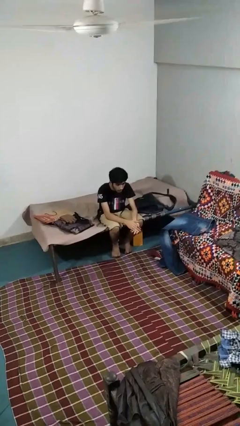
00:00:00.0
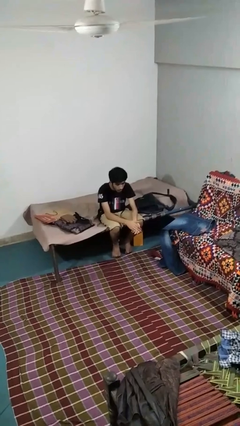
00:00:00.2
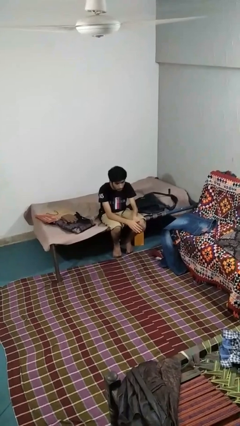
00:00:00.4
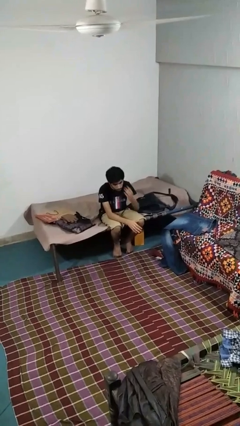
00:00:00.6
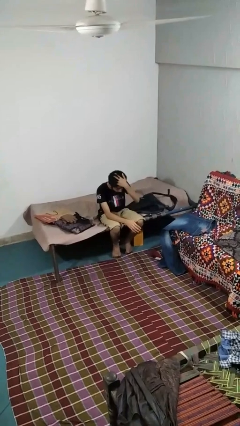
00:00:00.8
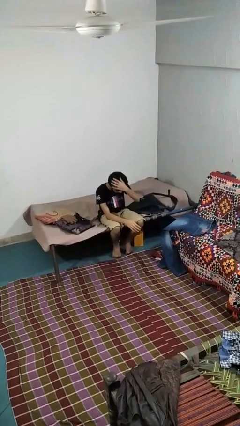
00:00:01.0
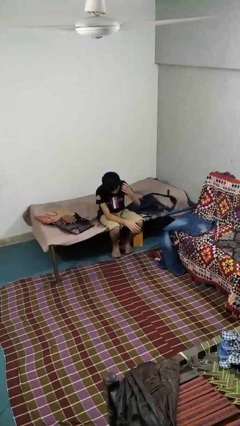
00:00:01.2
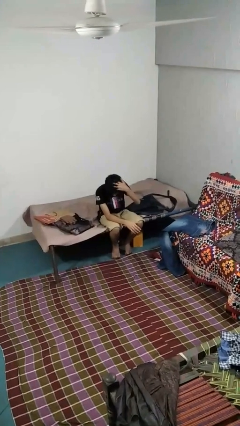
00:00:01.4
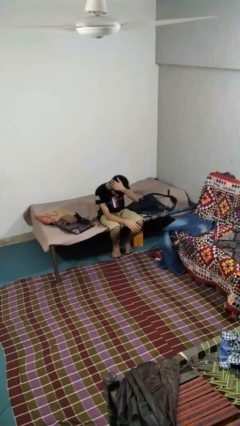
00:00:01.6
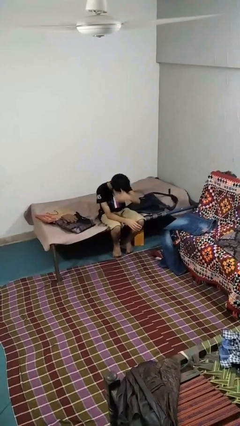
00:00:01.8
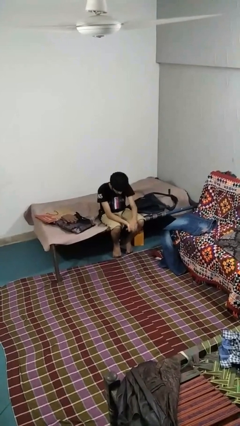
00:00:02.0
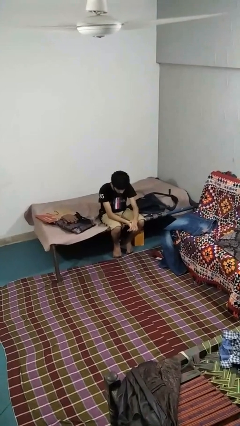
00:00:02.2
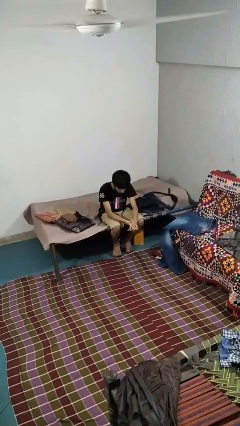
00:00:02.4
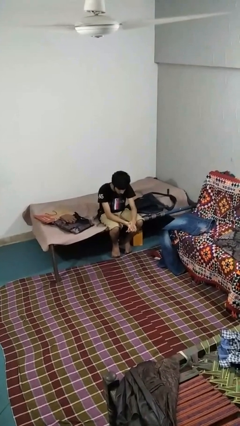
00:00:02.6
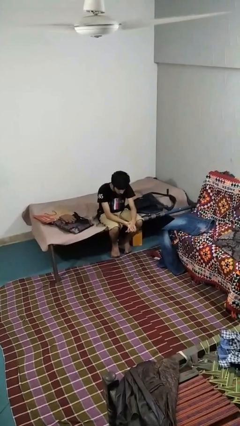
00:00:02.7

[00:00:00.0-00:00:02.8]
person strokes hair

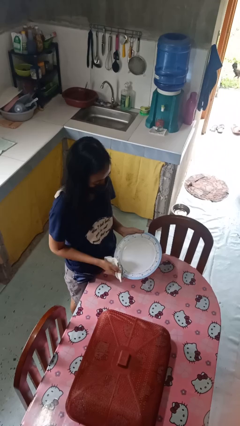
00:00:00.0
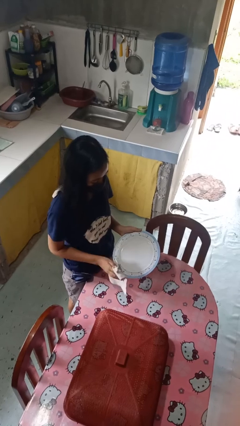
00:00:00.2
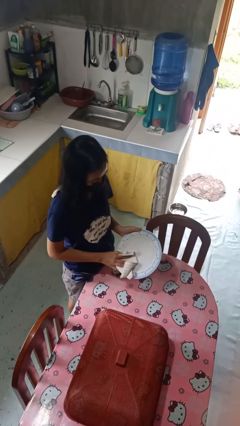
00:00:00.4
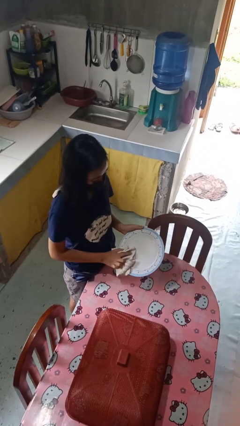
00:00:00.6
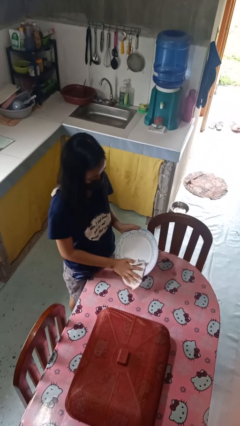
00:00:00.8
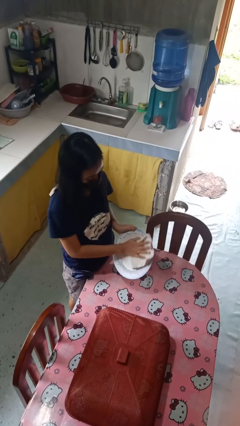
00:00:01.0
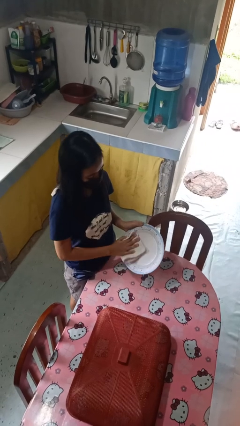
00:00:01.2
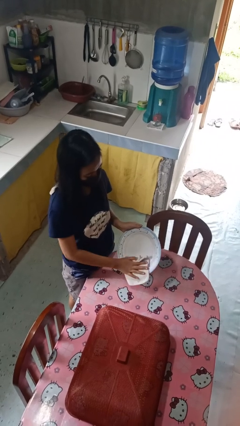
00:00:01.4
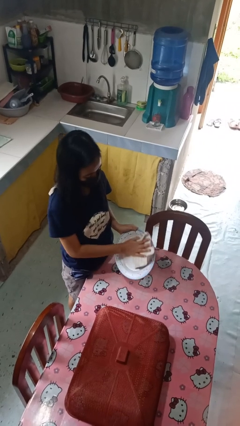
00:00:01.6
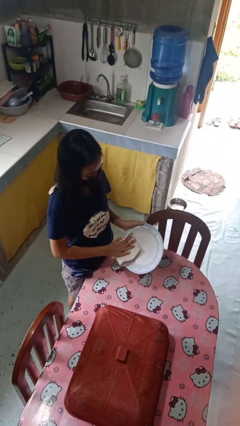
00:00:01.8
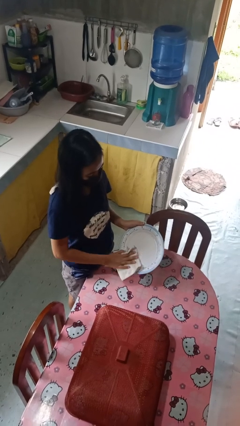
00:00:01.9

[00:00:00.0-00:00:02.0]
person dries dish

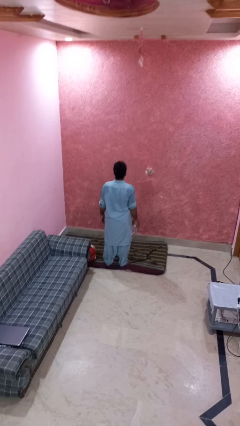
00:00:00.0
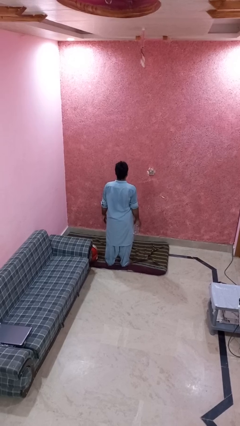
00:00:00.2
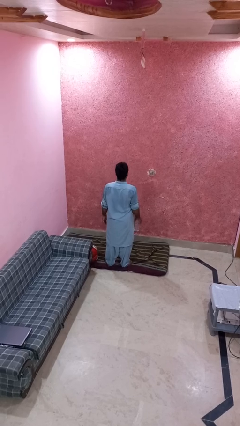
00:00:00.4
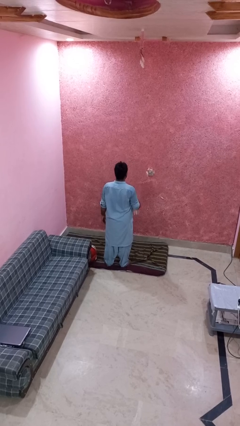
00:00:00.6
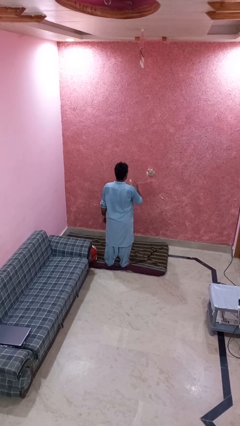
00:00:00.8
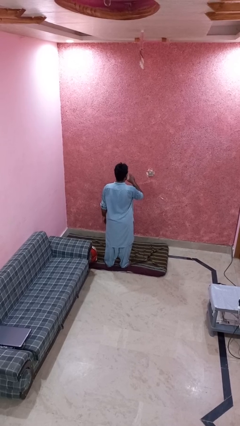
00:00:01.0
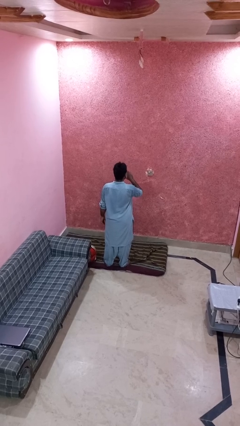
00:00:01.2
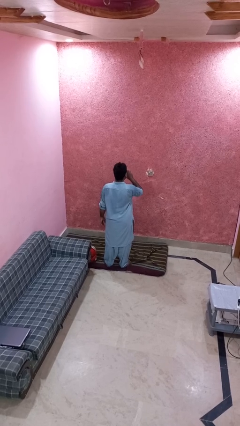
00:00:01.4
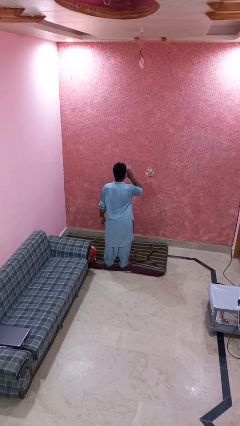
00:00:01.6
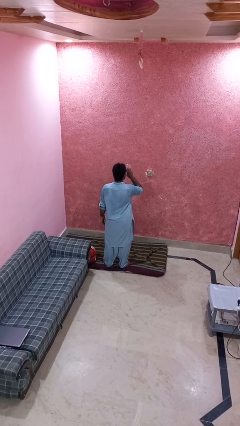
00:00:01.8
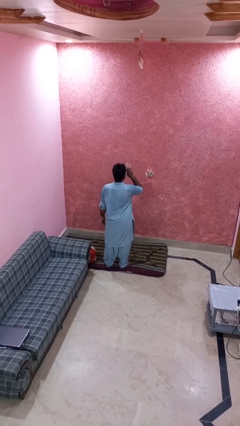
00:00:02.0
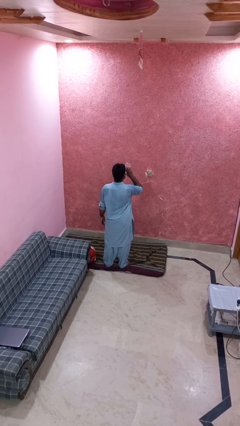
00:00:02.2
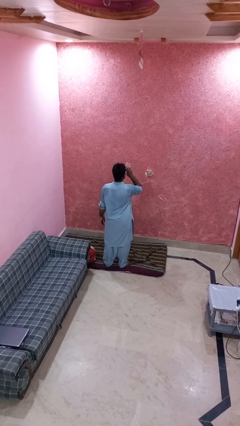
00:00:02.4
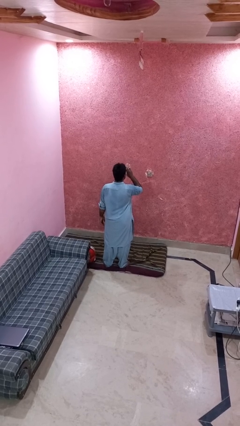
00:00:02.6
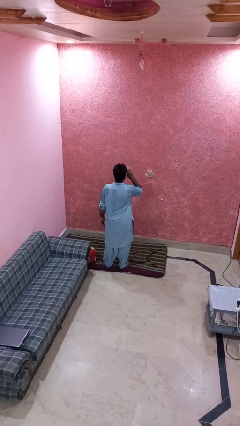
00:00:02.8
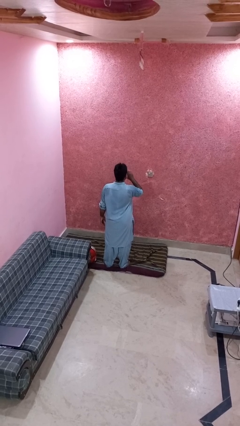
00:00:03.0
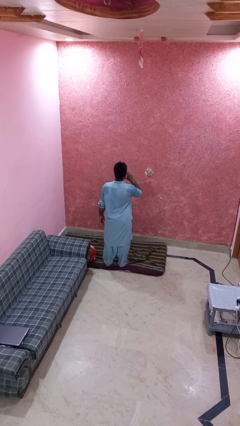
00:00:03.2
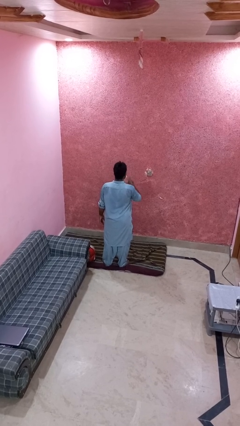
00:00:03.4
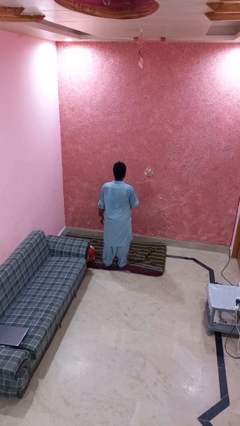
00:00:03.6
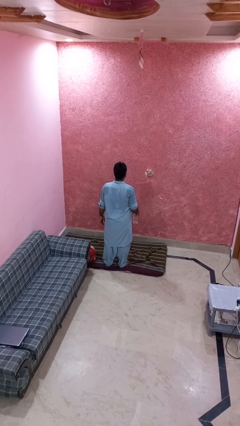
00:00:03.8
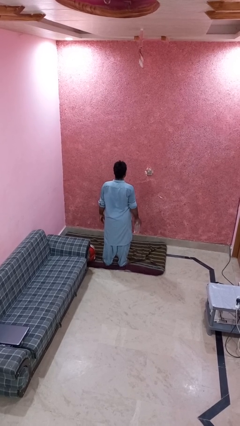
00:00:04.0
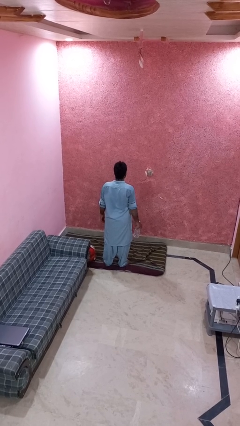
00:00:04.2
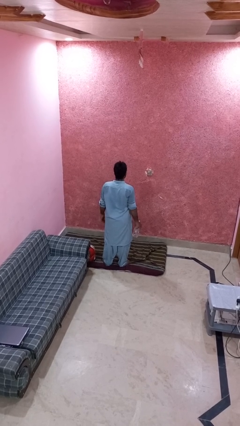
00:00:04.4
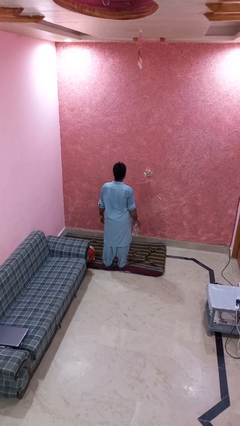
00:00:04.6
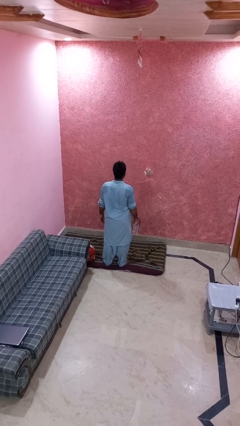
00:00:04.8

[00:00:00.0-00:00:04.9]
person drinks from bottle

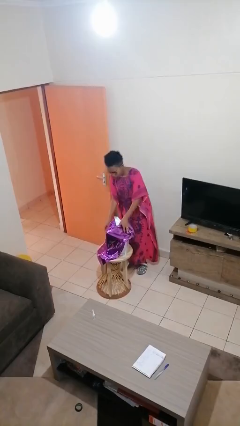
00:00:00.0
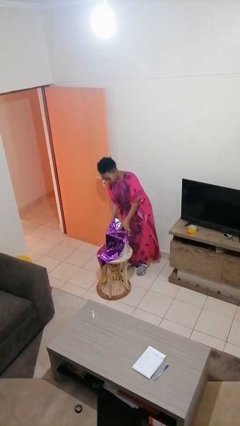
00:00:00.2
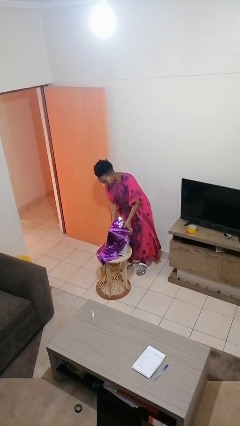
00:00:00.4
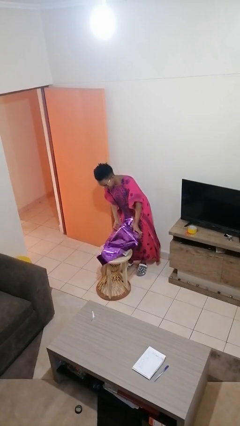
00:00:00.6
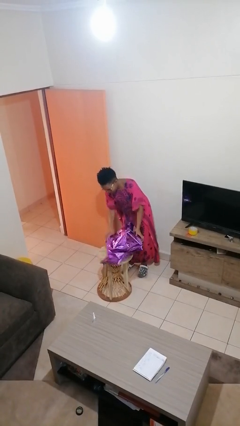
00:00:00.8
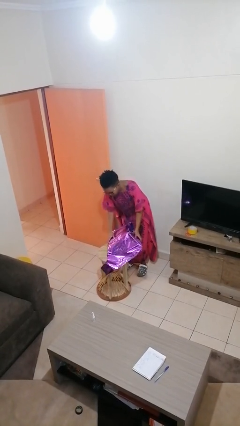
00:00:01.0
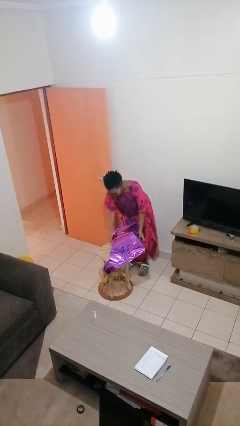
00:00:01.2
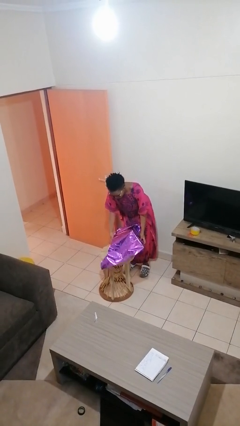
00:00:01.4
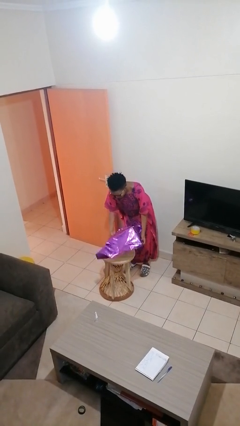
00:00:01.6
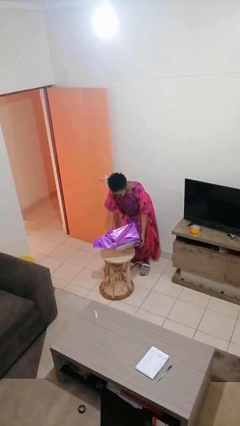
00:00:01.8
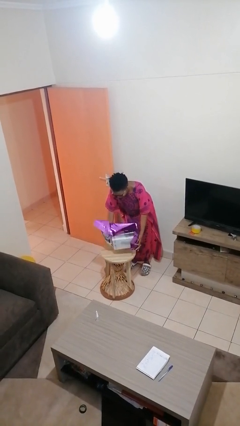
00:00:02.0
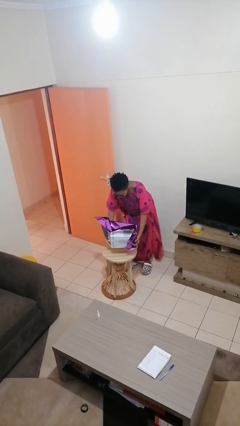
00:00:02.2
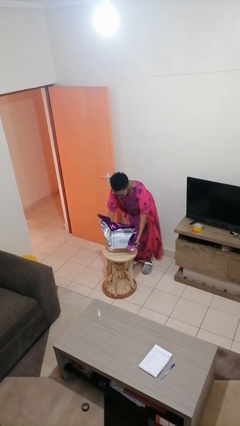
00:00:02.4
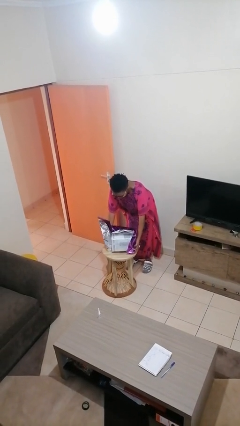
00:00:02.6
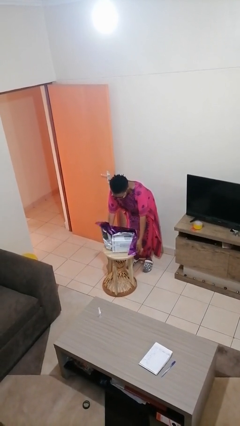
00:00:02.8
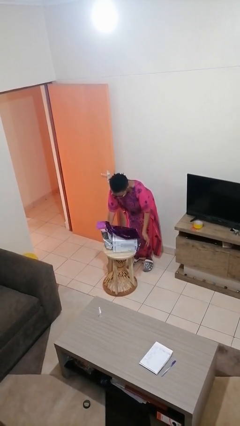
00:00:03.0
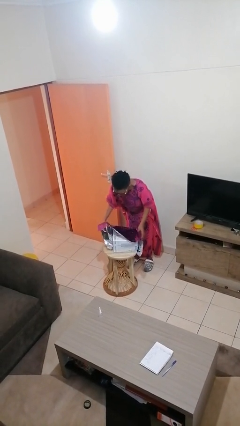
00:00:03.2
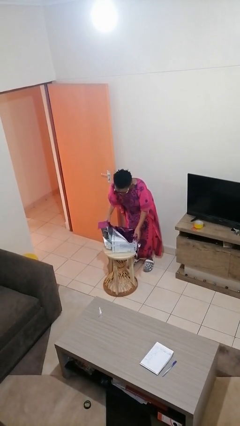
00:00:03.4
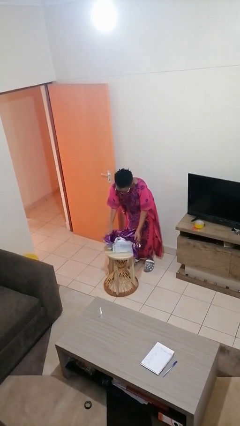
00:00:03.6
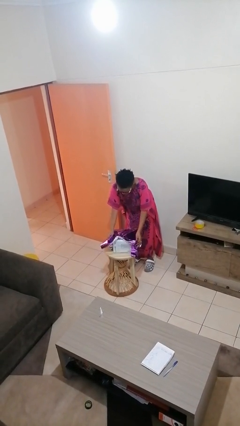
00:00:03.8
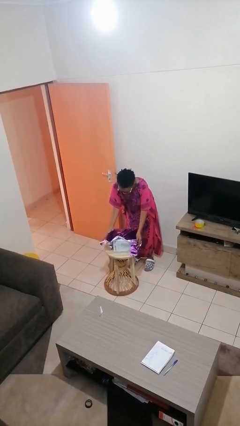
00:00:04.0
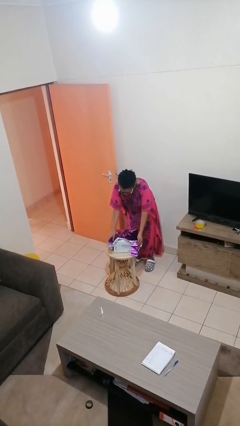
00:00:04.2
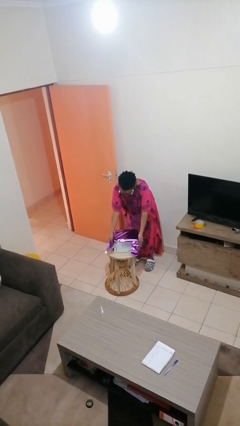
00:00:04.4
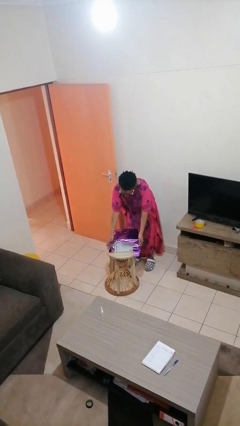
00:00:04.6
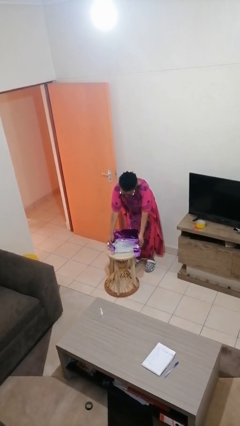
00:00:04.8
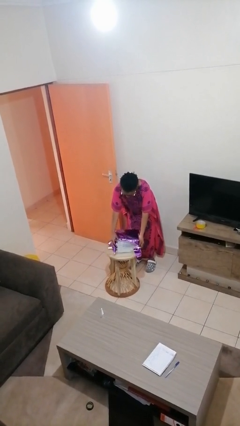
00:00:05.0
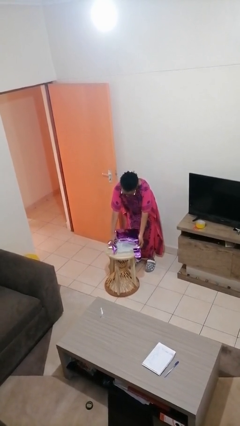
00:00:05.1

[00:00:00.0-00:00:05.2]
person wraps box

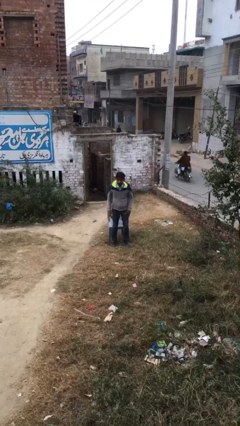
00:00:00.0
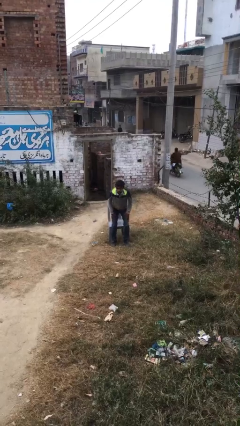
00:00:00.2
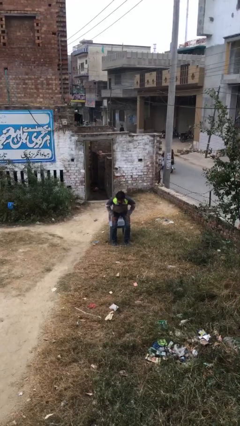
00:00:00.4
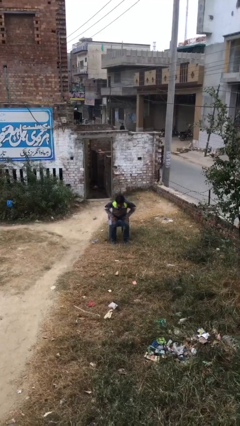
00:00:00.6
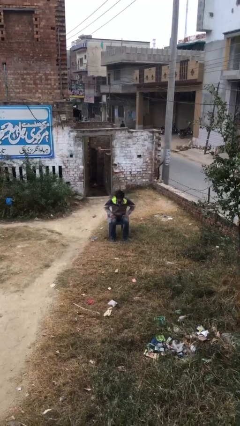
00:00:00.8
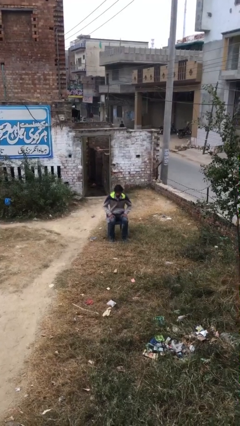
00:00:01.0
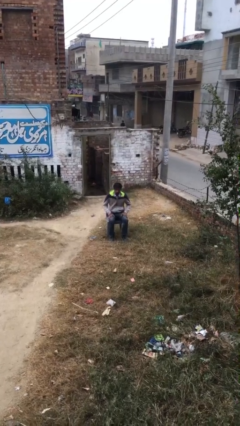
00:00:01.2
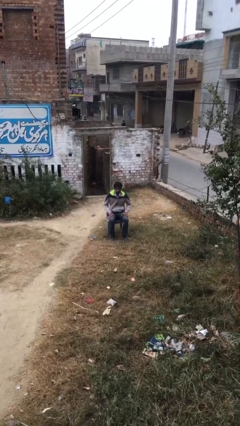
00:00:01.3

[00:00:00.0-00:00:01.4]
person sits down

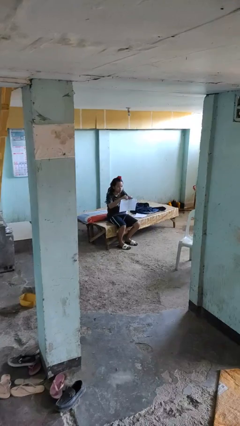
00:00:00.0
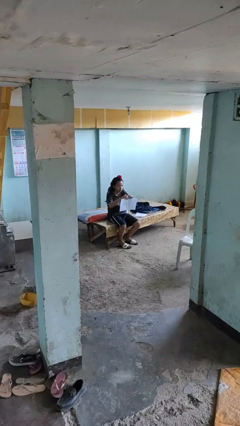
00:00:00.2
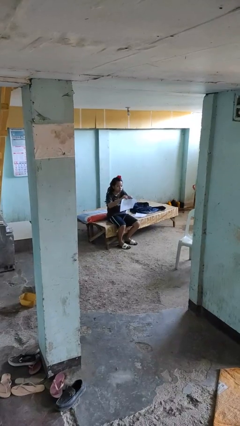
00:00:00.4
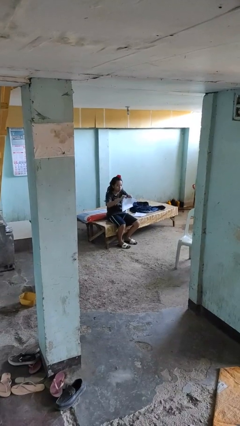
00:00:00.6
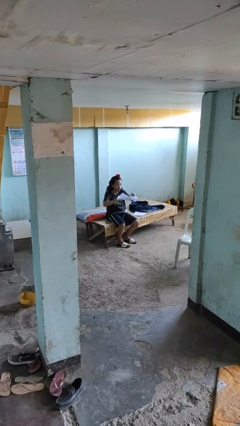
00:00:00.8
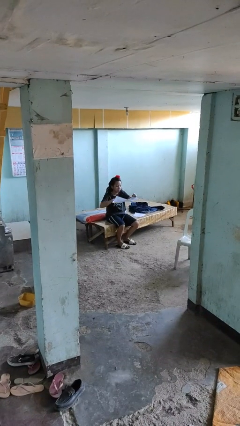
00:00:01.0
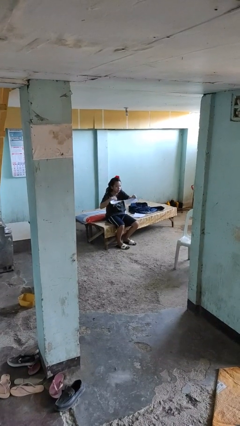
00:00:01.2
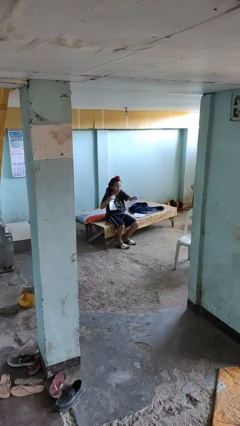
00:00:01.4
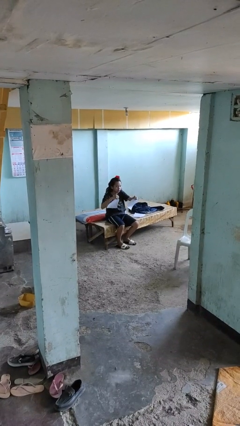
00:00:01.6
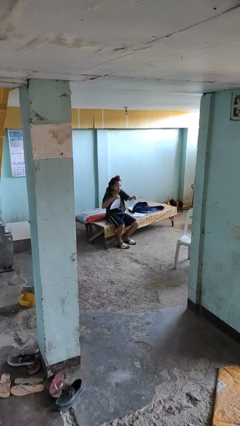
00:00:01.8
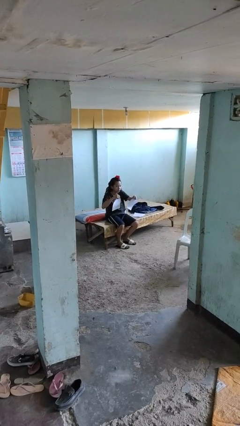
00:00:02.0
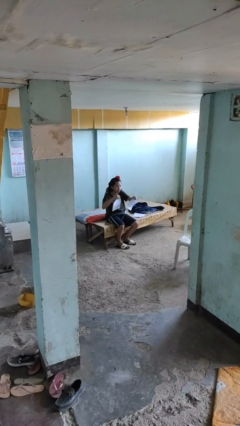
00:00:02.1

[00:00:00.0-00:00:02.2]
person tears paper
